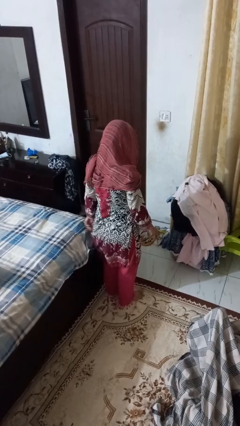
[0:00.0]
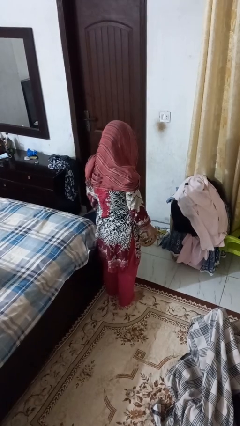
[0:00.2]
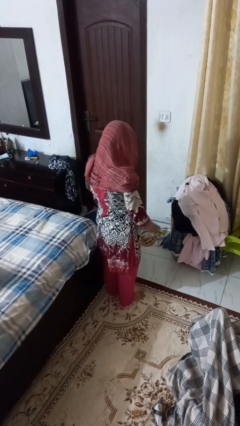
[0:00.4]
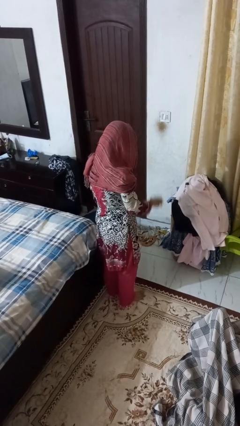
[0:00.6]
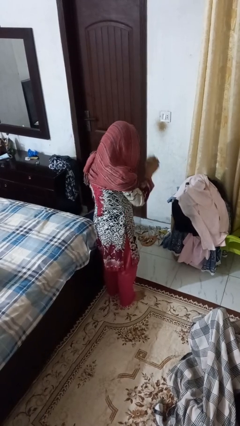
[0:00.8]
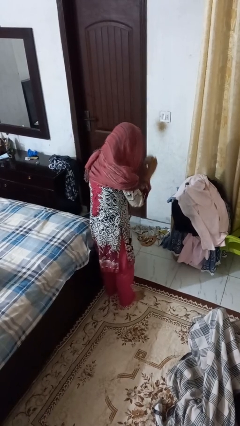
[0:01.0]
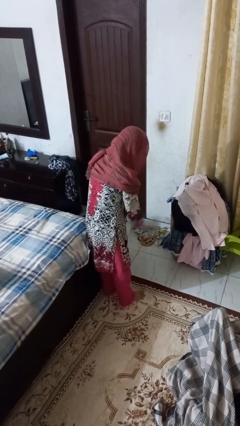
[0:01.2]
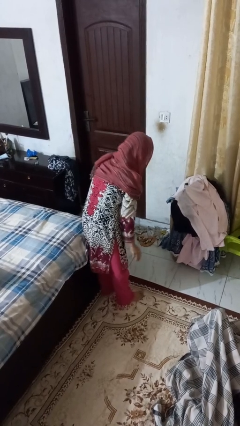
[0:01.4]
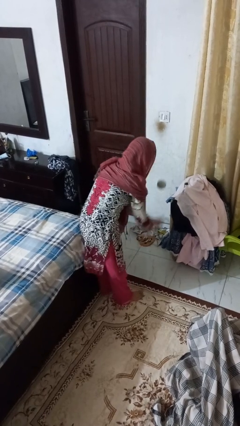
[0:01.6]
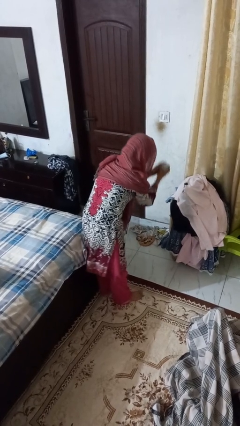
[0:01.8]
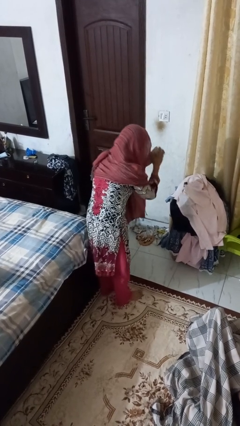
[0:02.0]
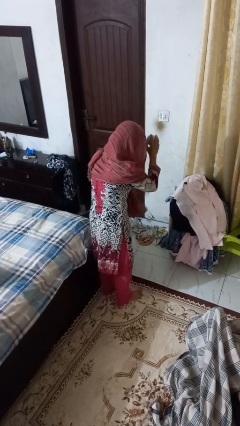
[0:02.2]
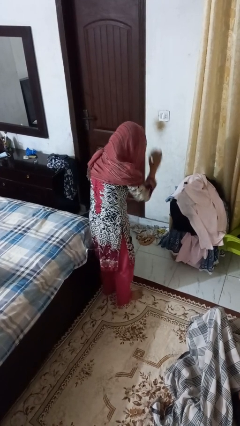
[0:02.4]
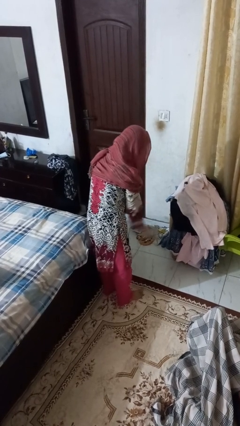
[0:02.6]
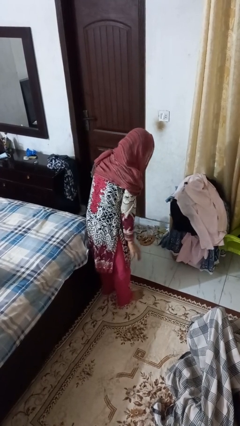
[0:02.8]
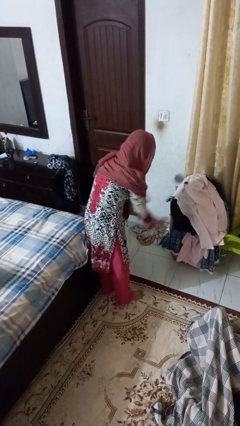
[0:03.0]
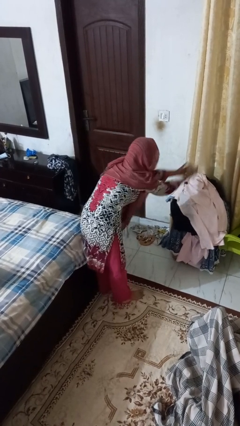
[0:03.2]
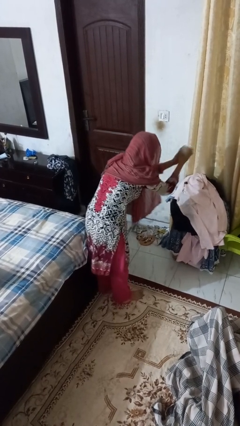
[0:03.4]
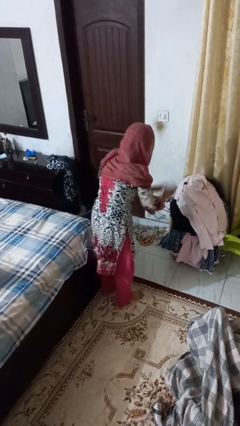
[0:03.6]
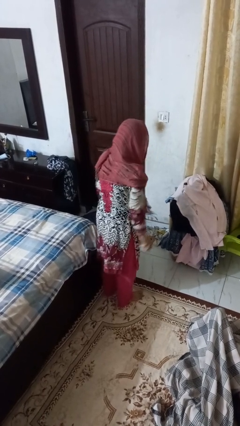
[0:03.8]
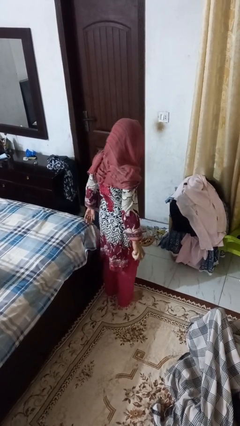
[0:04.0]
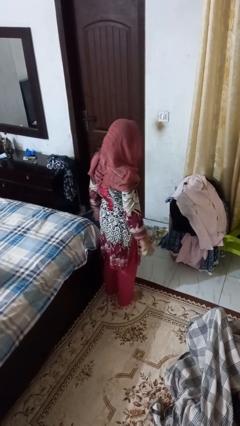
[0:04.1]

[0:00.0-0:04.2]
person bounces ball on floor

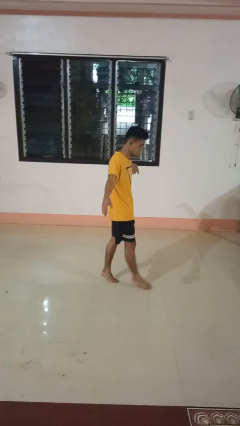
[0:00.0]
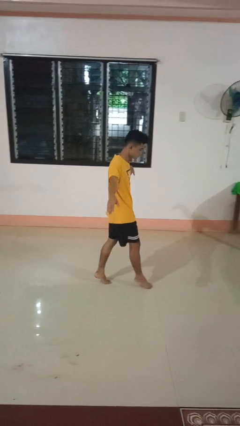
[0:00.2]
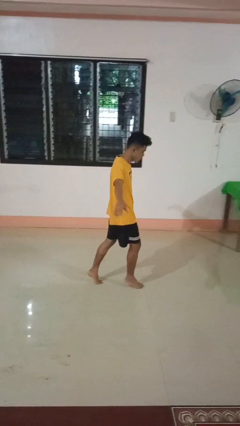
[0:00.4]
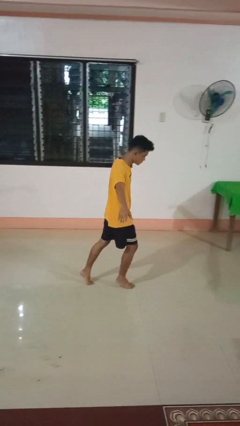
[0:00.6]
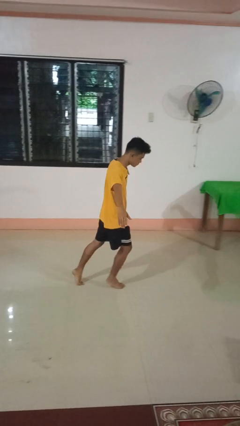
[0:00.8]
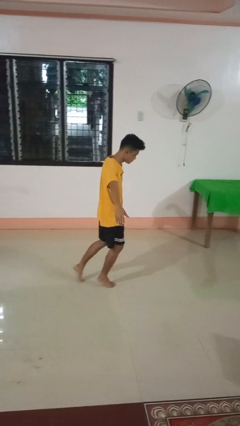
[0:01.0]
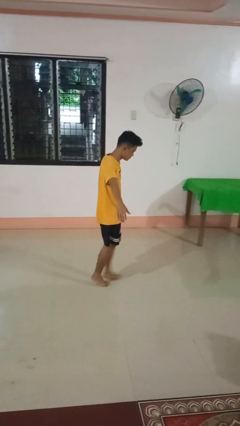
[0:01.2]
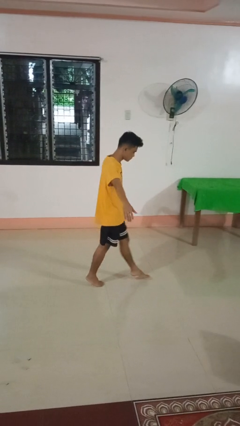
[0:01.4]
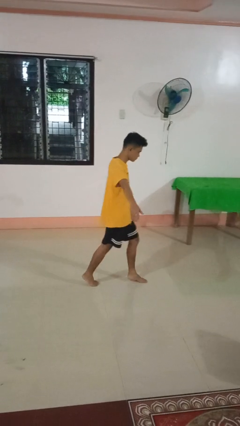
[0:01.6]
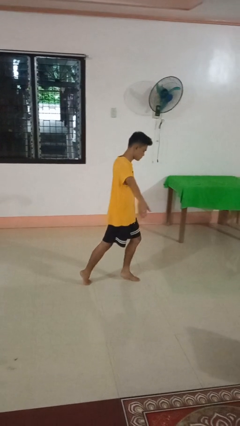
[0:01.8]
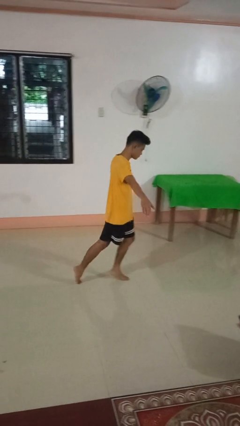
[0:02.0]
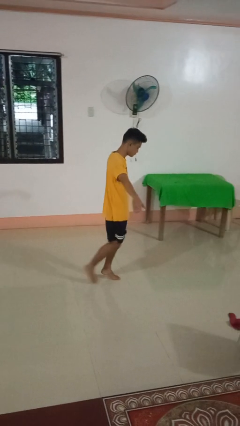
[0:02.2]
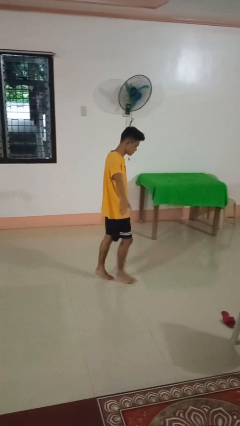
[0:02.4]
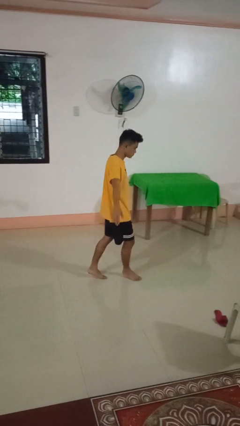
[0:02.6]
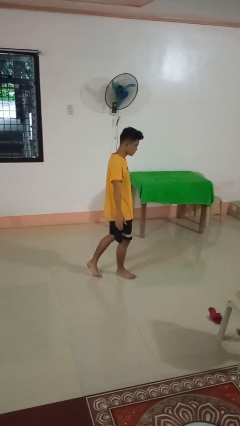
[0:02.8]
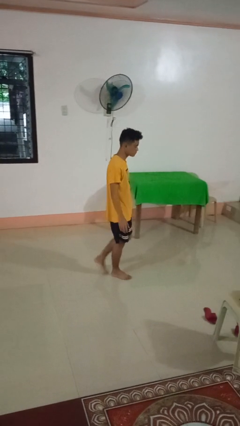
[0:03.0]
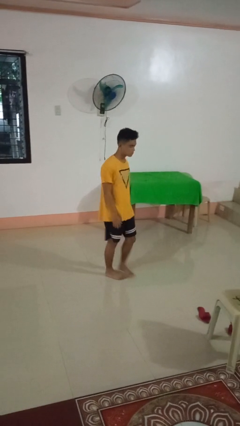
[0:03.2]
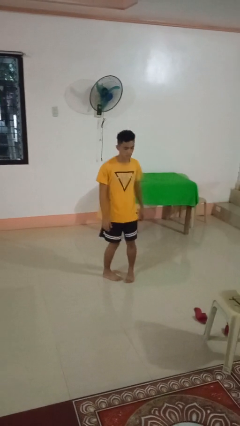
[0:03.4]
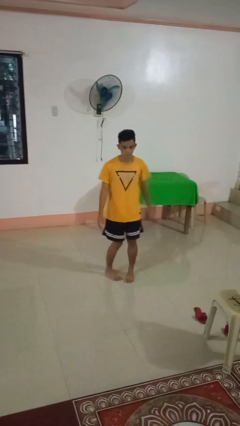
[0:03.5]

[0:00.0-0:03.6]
person walks tiptoe

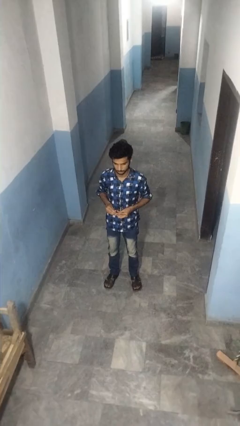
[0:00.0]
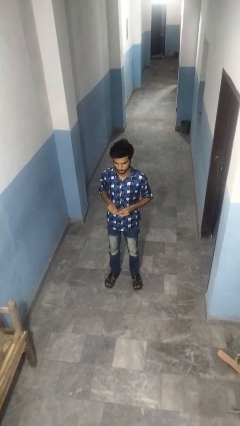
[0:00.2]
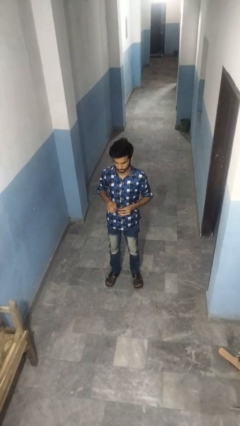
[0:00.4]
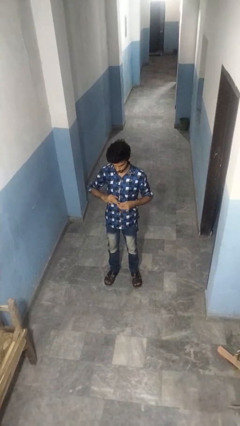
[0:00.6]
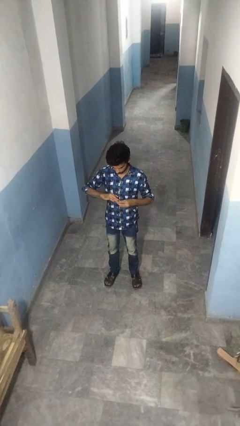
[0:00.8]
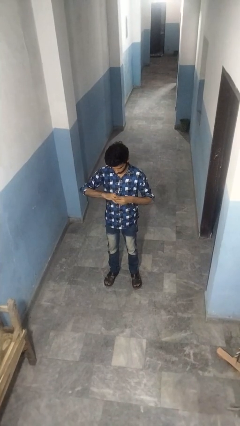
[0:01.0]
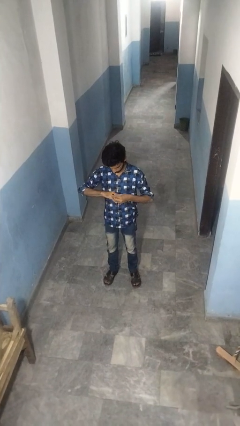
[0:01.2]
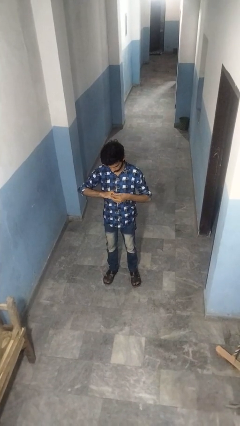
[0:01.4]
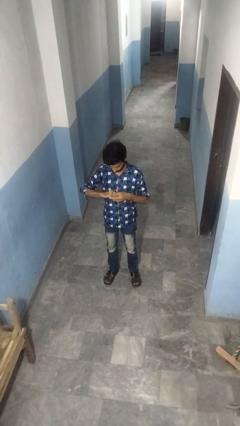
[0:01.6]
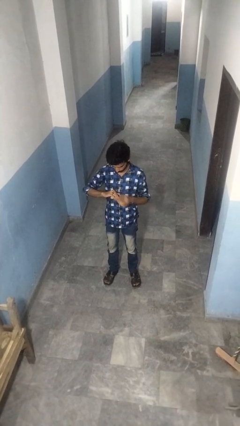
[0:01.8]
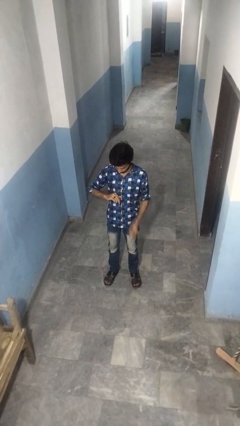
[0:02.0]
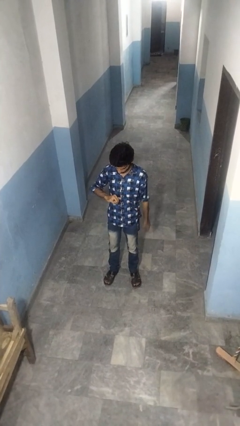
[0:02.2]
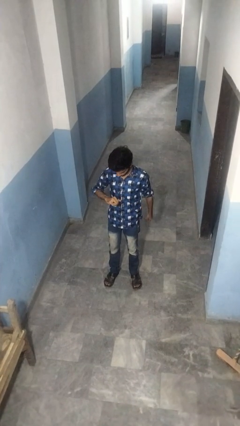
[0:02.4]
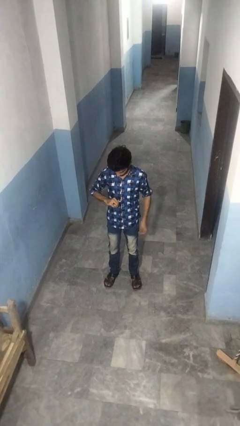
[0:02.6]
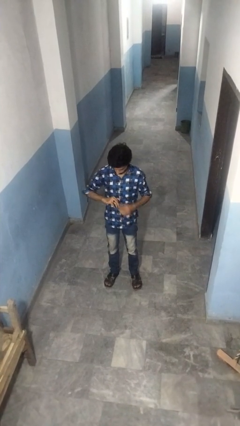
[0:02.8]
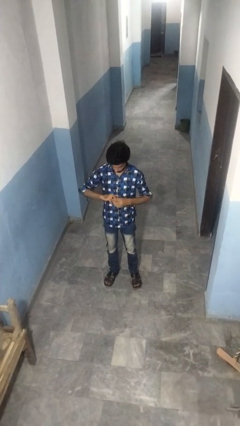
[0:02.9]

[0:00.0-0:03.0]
person puts on ring

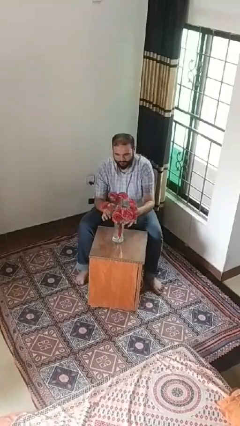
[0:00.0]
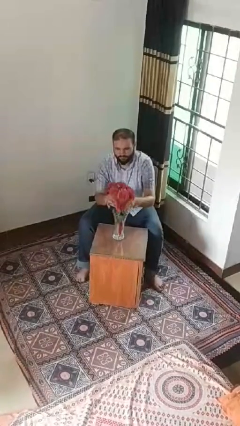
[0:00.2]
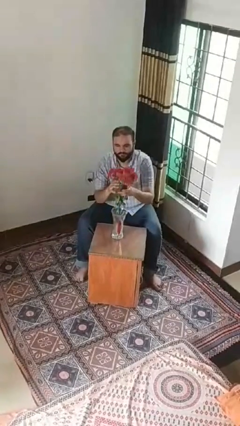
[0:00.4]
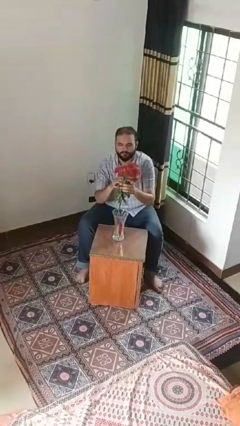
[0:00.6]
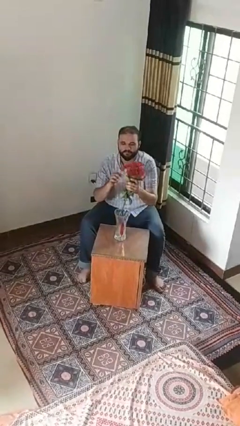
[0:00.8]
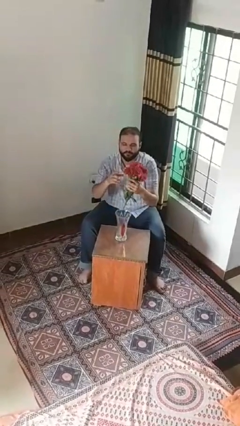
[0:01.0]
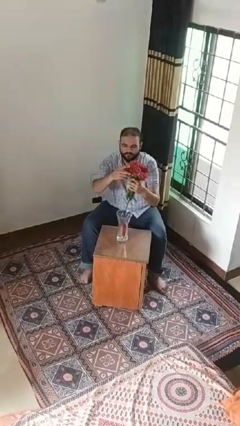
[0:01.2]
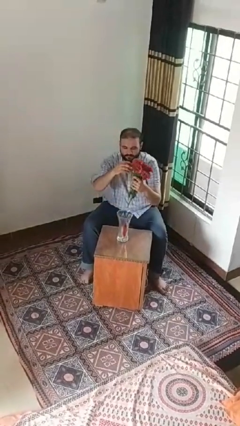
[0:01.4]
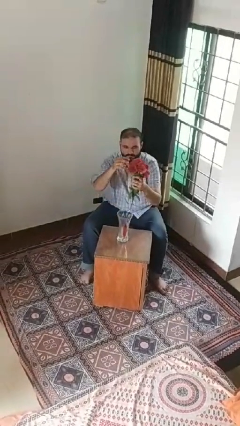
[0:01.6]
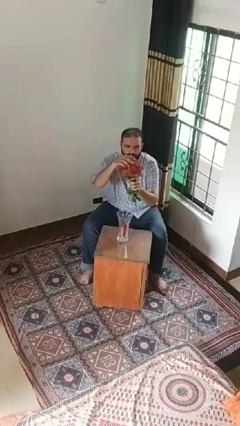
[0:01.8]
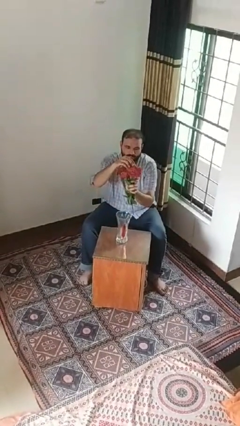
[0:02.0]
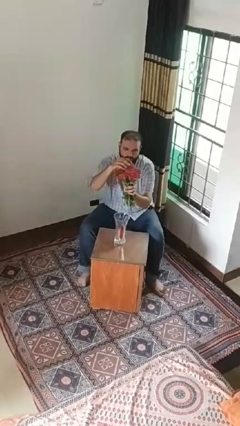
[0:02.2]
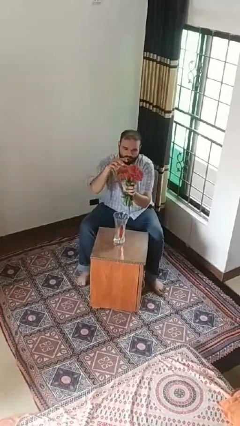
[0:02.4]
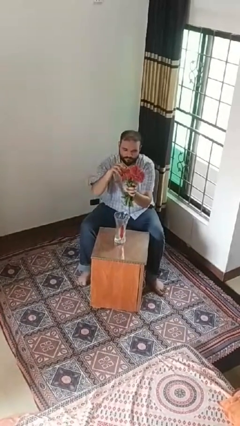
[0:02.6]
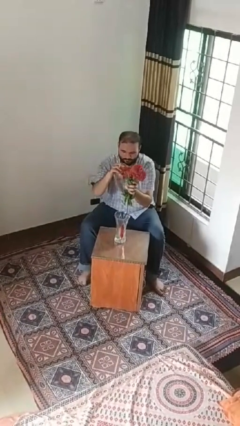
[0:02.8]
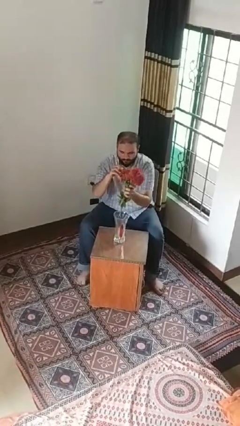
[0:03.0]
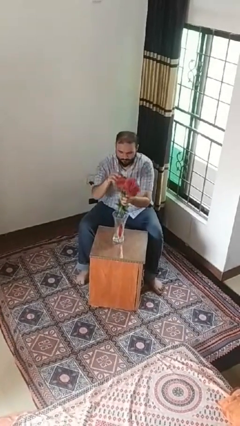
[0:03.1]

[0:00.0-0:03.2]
person arranges flowers in vase

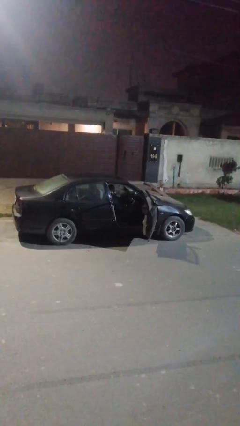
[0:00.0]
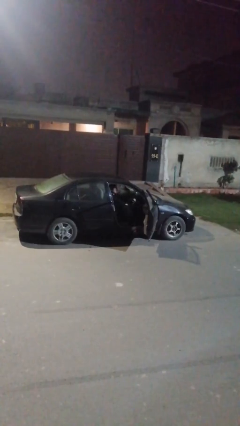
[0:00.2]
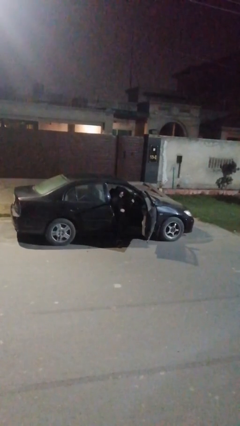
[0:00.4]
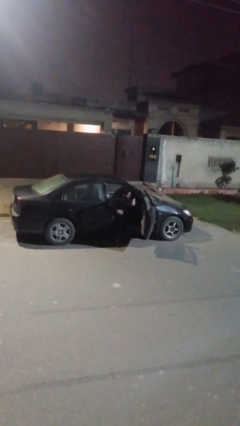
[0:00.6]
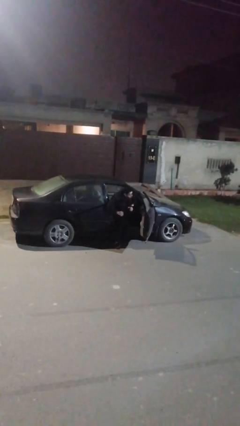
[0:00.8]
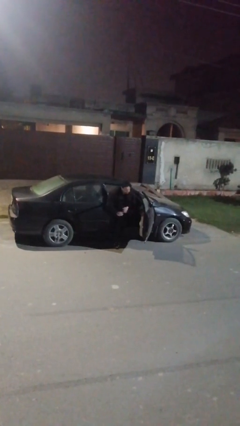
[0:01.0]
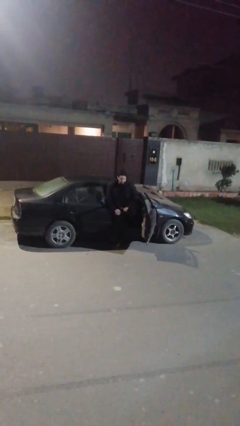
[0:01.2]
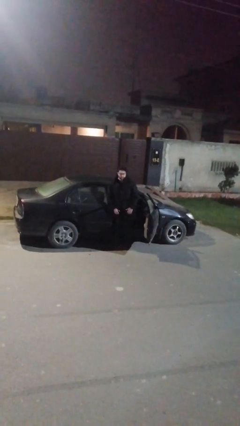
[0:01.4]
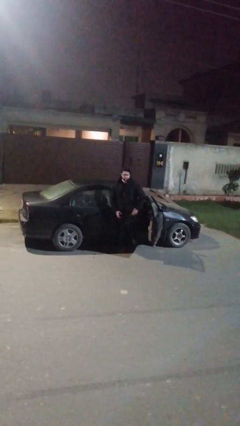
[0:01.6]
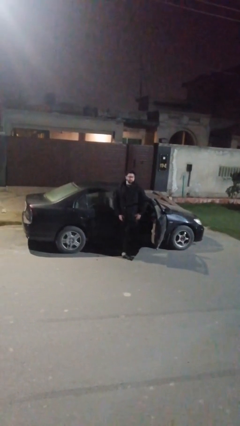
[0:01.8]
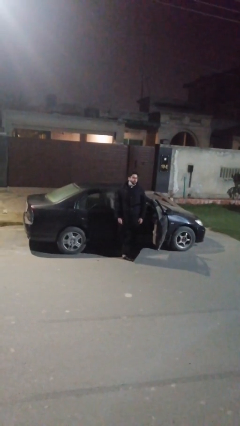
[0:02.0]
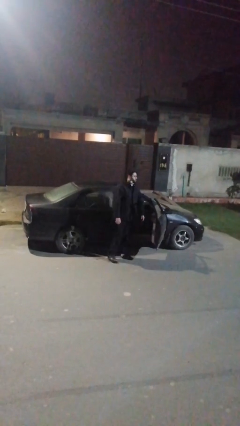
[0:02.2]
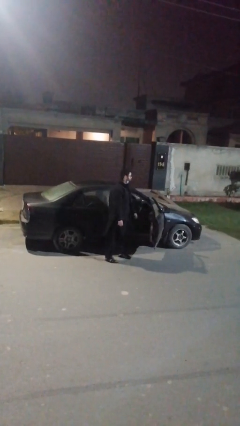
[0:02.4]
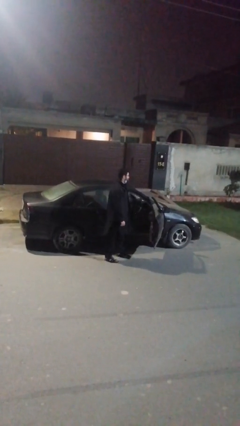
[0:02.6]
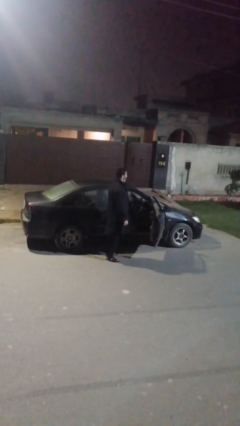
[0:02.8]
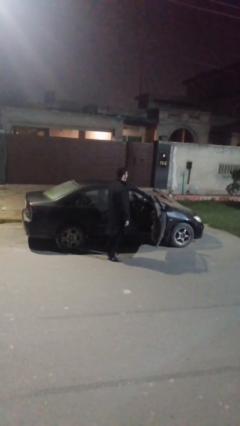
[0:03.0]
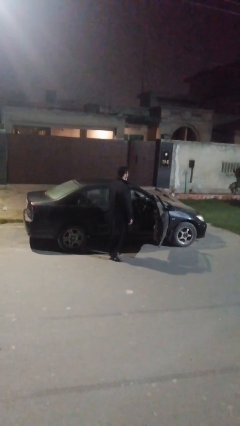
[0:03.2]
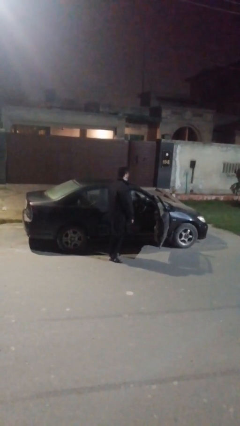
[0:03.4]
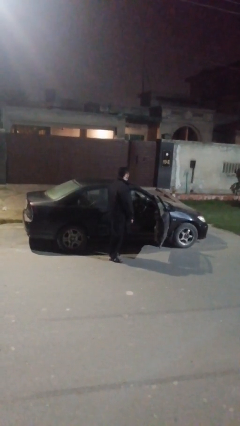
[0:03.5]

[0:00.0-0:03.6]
person exits car
